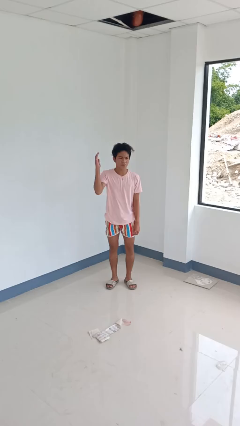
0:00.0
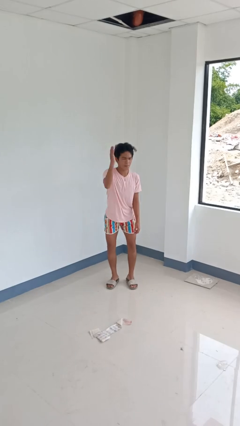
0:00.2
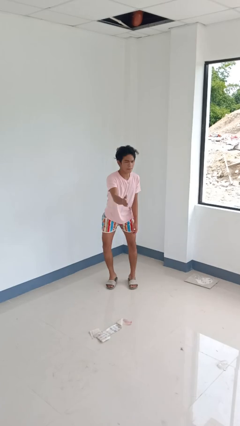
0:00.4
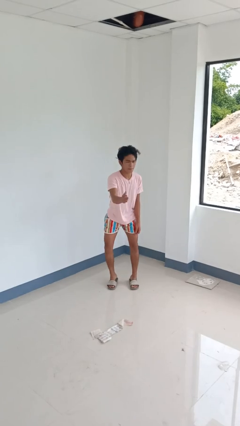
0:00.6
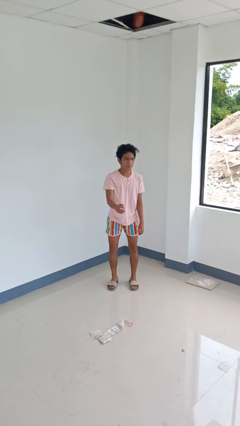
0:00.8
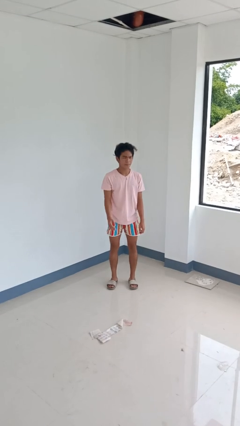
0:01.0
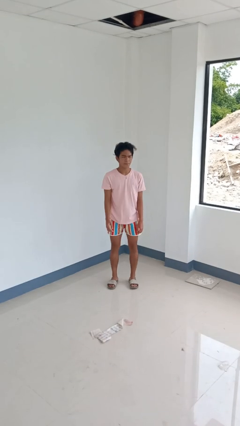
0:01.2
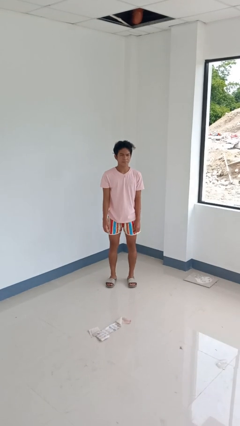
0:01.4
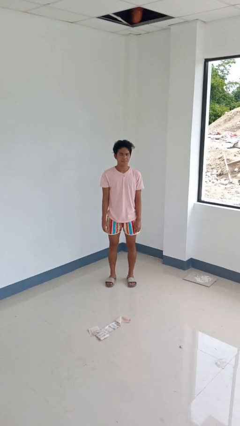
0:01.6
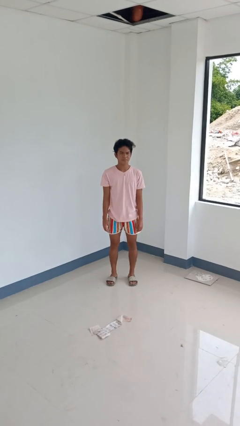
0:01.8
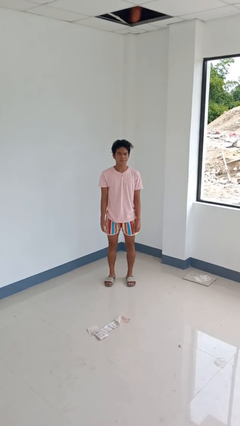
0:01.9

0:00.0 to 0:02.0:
person karate chop

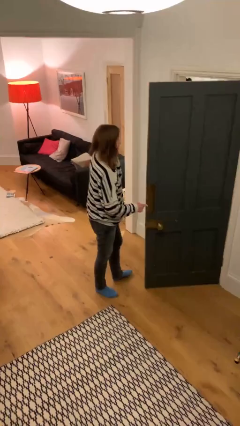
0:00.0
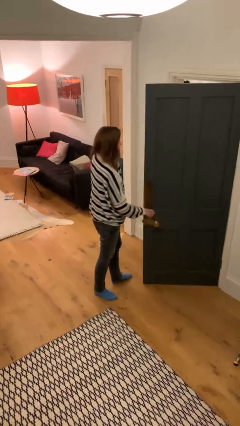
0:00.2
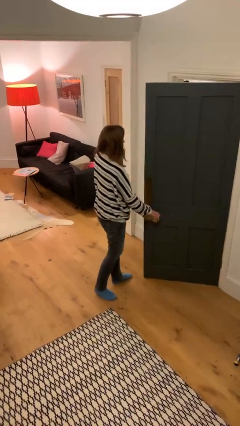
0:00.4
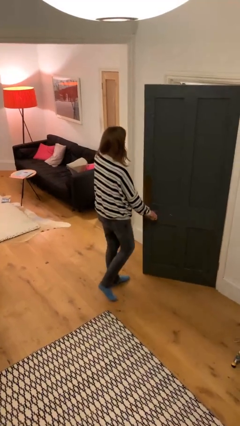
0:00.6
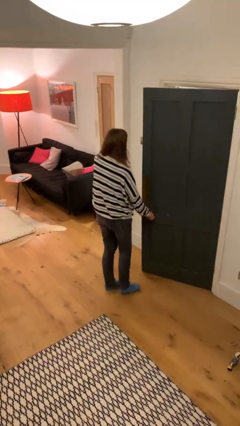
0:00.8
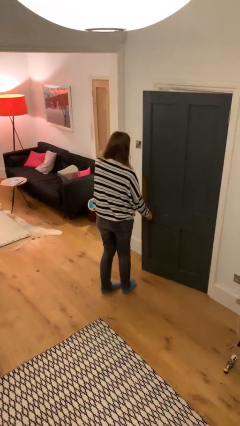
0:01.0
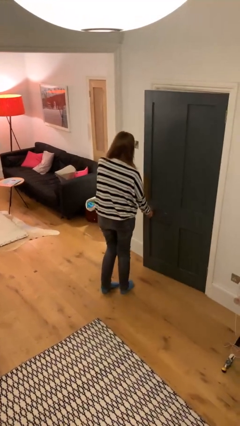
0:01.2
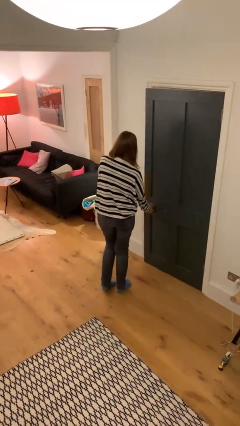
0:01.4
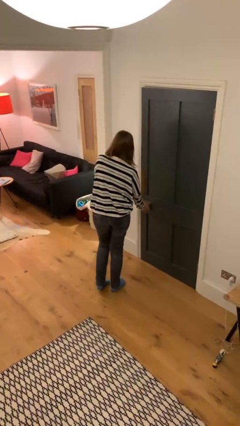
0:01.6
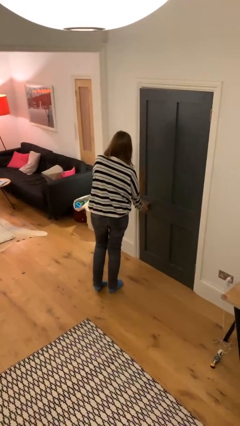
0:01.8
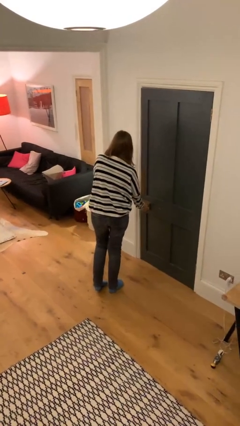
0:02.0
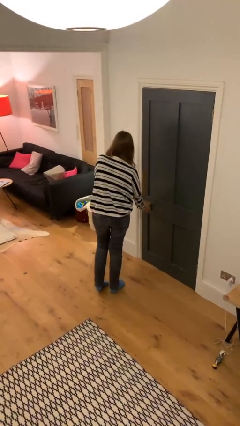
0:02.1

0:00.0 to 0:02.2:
person closes facility door

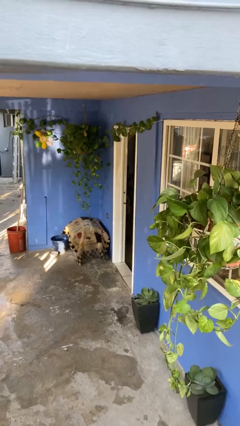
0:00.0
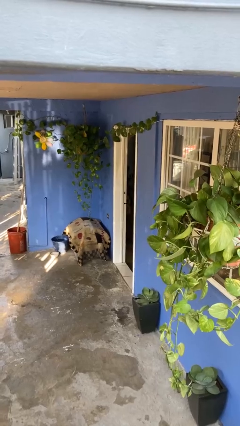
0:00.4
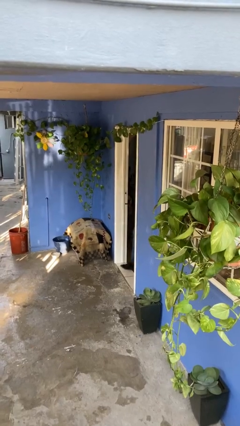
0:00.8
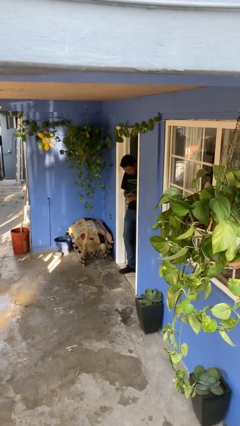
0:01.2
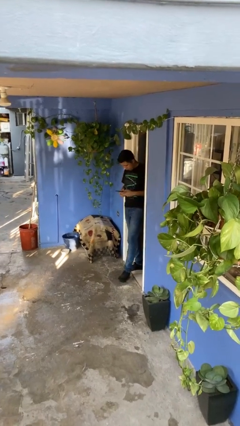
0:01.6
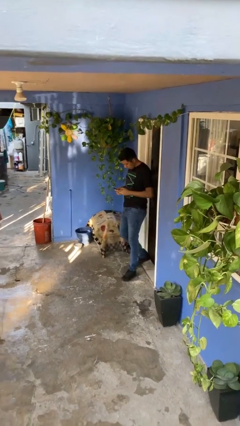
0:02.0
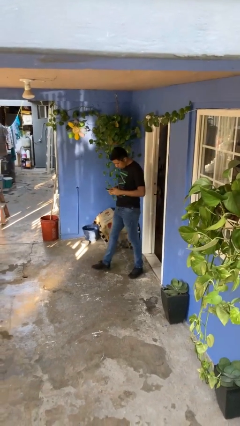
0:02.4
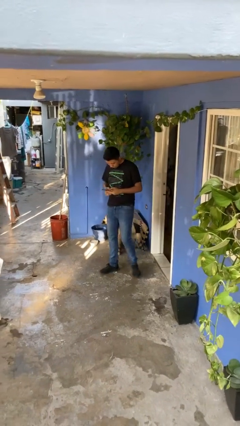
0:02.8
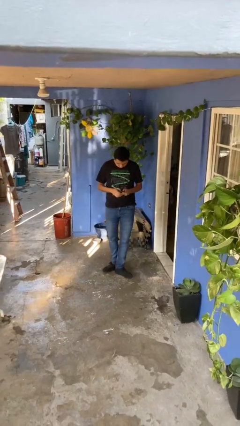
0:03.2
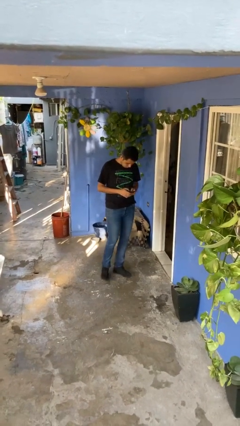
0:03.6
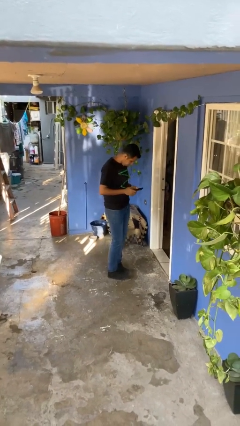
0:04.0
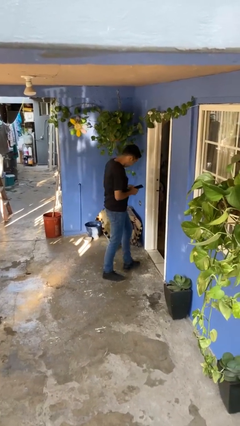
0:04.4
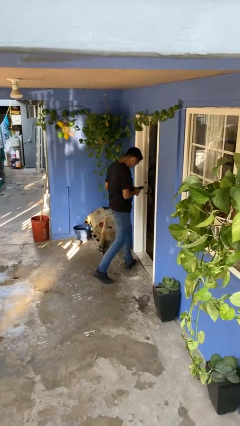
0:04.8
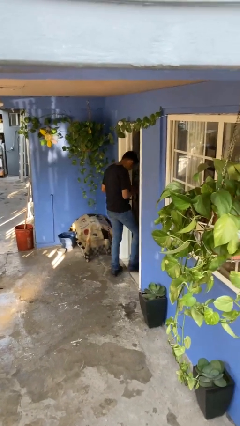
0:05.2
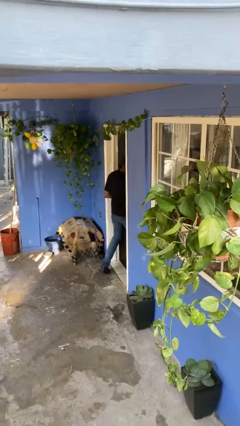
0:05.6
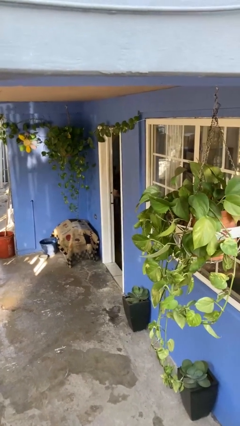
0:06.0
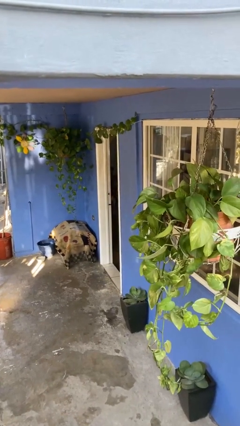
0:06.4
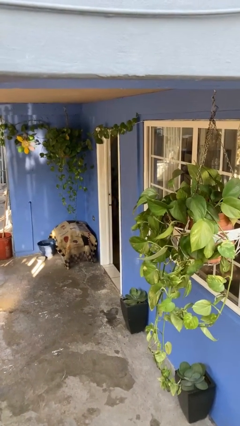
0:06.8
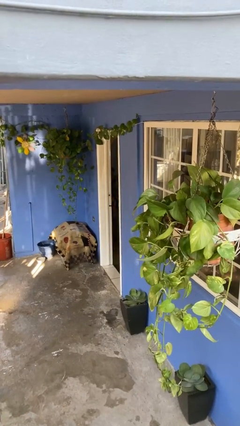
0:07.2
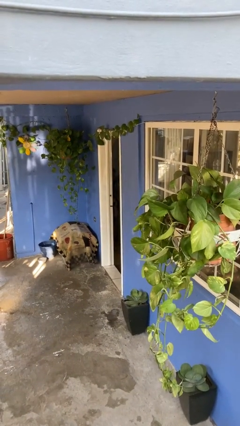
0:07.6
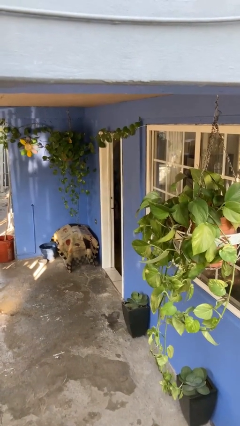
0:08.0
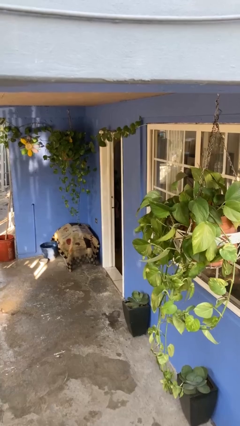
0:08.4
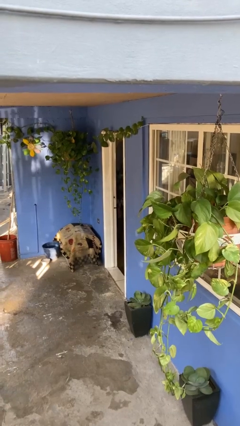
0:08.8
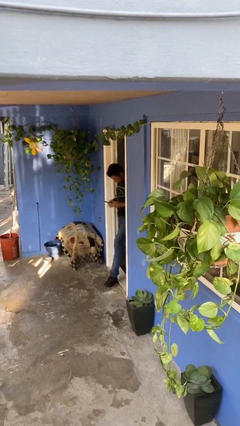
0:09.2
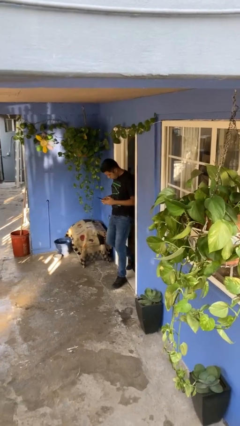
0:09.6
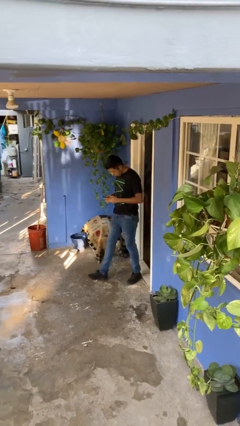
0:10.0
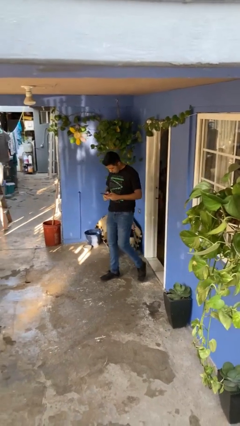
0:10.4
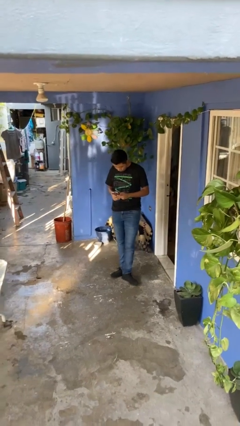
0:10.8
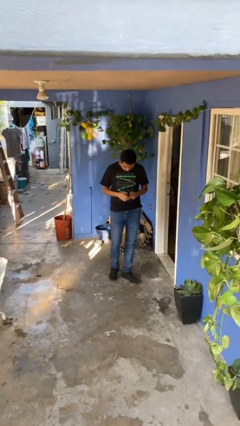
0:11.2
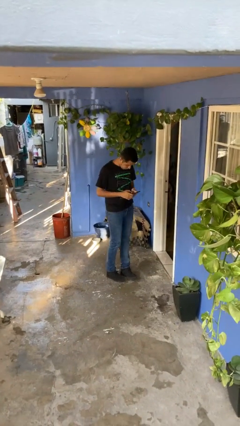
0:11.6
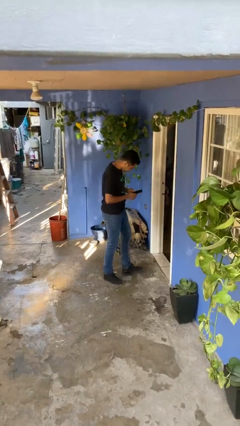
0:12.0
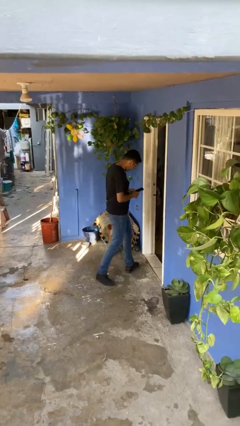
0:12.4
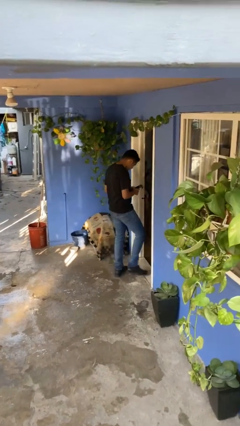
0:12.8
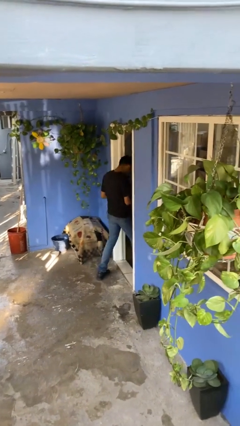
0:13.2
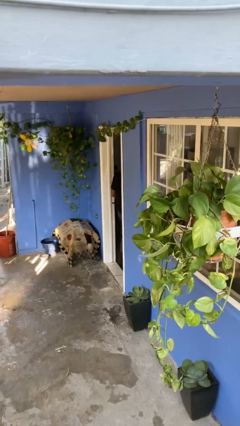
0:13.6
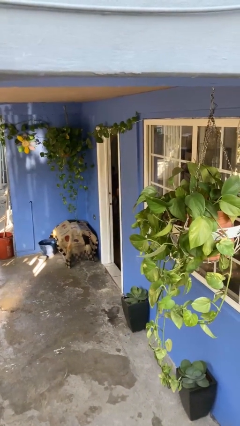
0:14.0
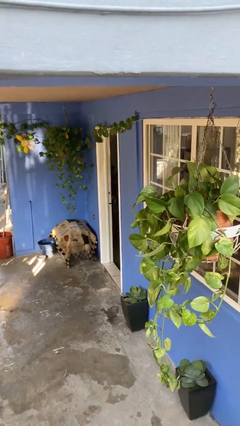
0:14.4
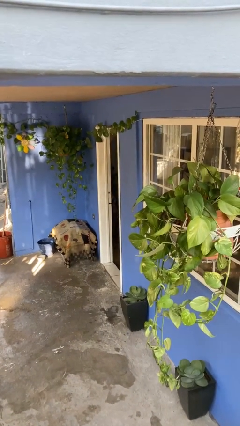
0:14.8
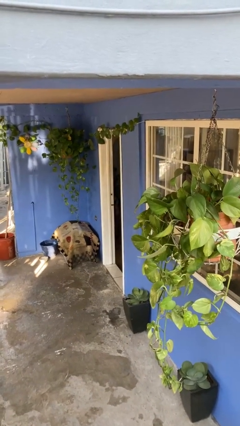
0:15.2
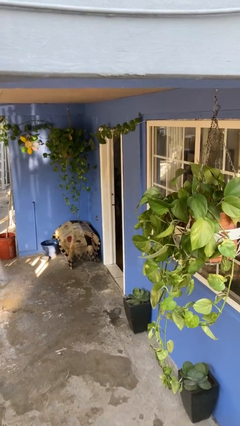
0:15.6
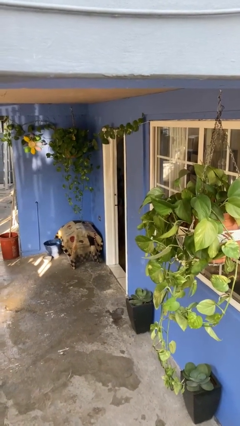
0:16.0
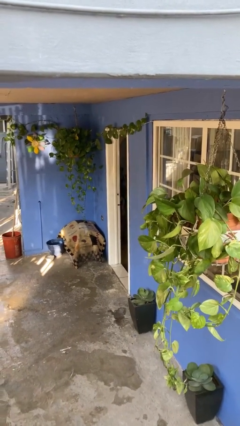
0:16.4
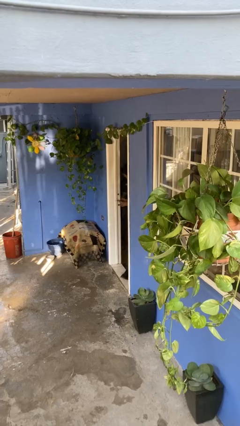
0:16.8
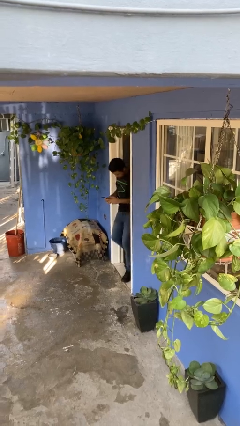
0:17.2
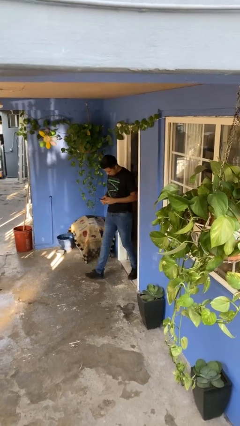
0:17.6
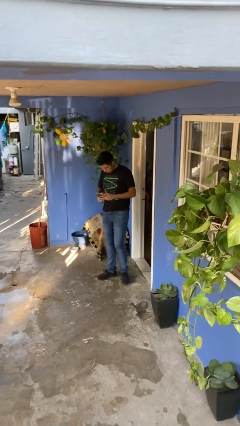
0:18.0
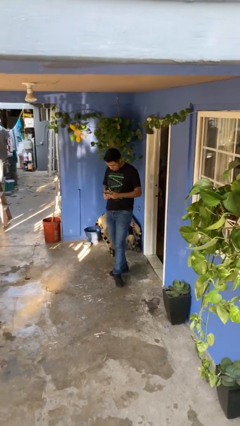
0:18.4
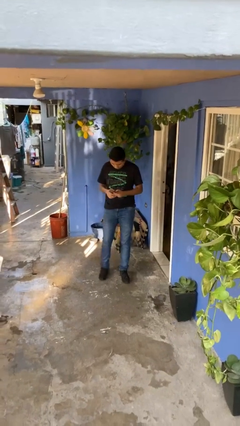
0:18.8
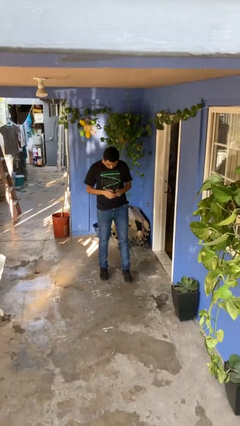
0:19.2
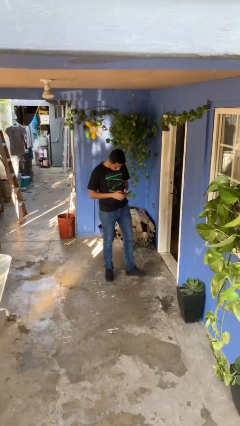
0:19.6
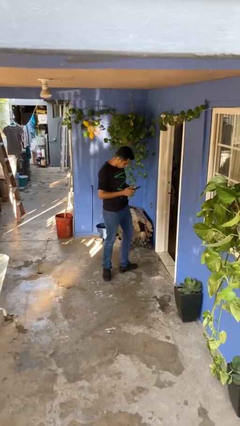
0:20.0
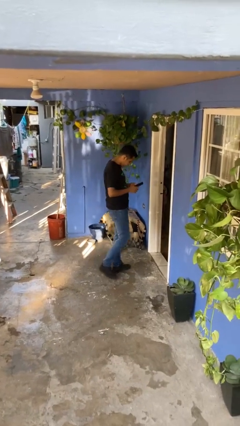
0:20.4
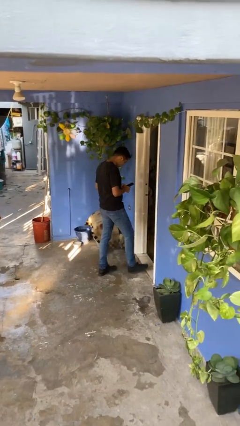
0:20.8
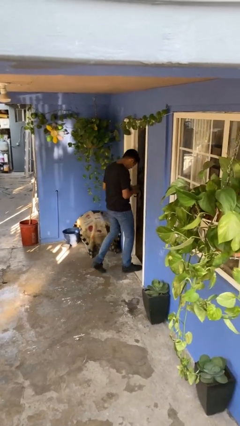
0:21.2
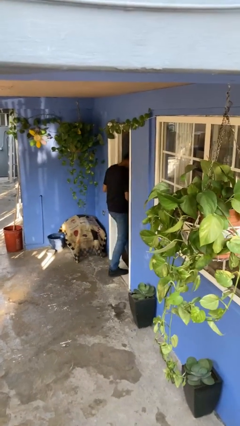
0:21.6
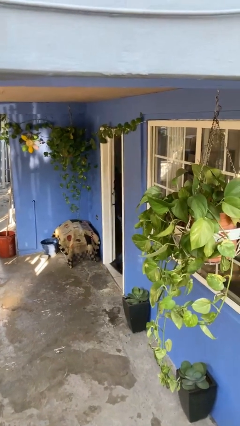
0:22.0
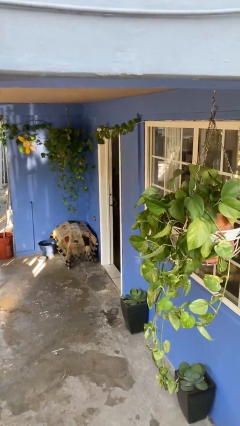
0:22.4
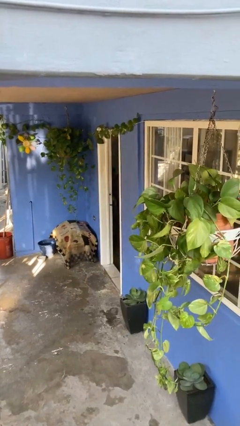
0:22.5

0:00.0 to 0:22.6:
person texts on phone

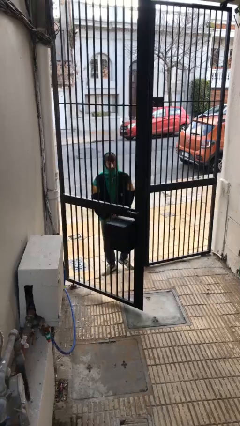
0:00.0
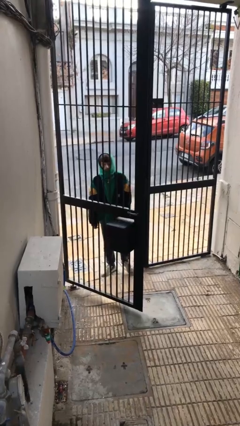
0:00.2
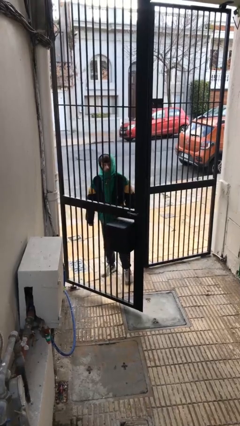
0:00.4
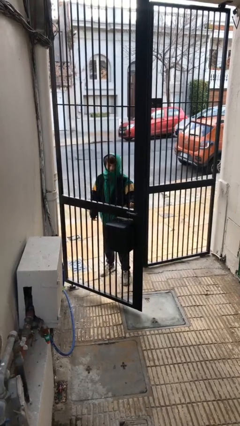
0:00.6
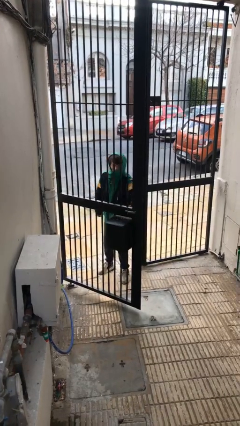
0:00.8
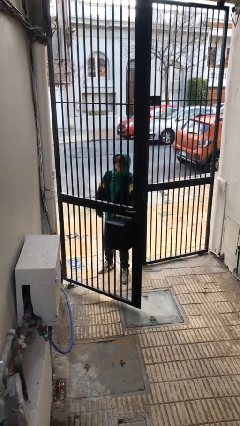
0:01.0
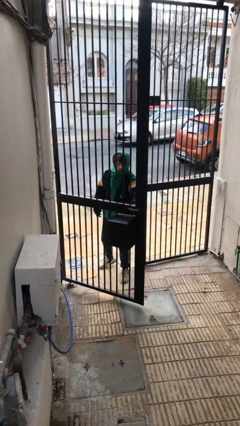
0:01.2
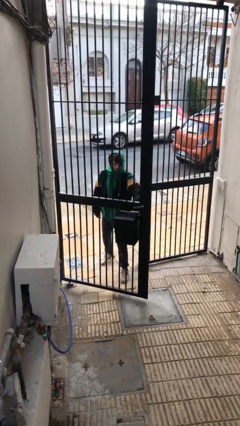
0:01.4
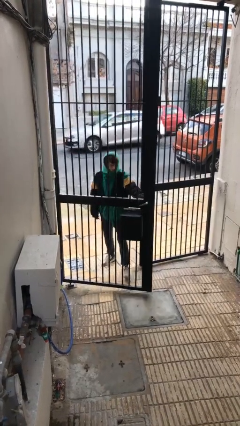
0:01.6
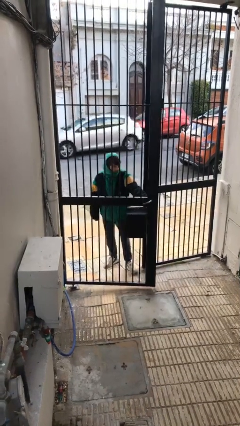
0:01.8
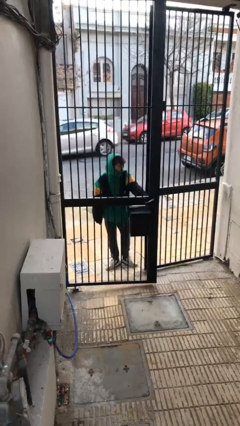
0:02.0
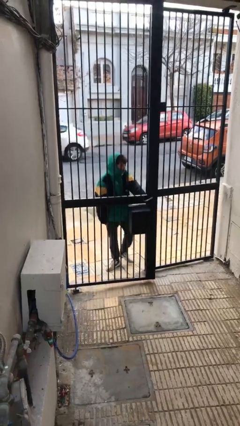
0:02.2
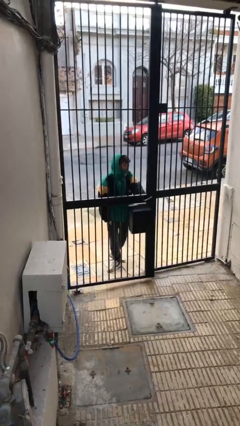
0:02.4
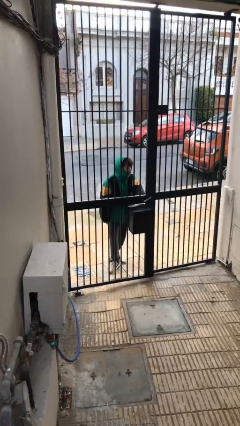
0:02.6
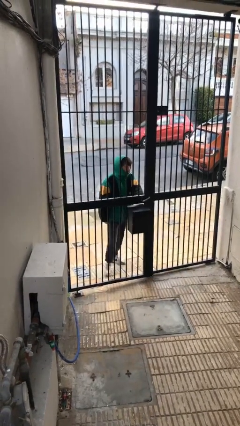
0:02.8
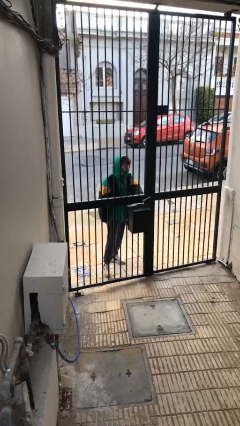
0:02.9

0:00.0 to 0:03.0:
person closes gate
